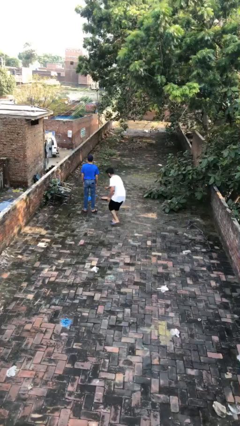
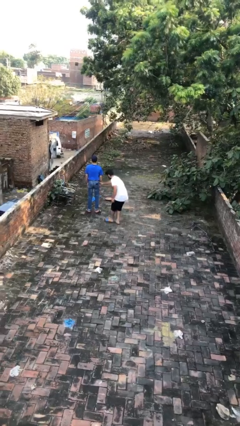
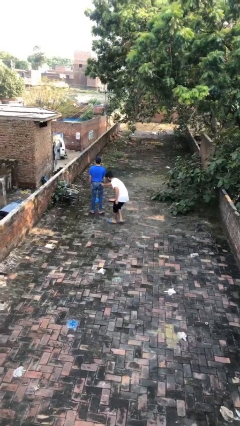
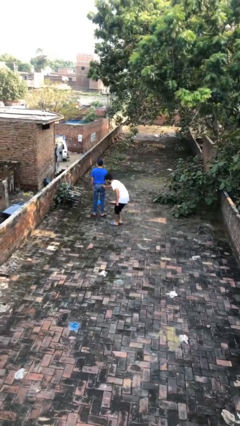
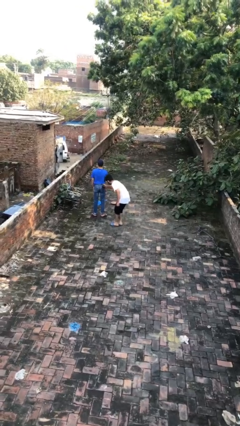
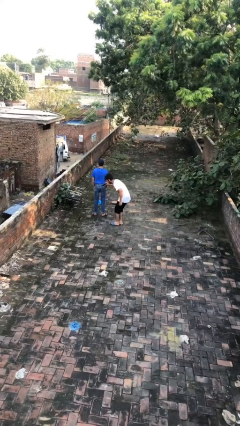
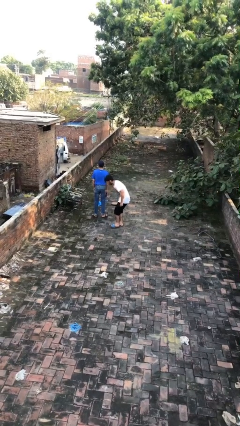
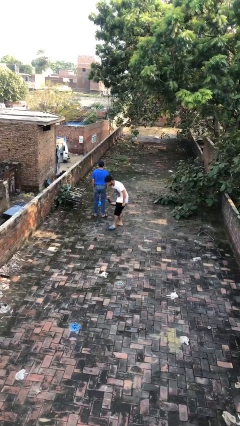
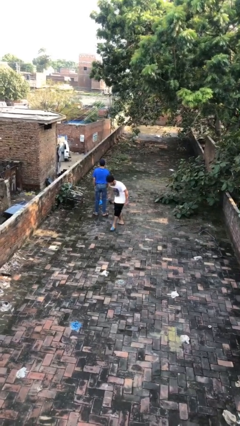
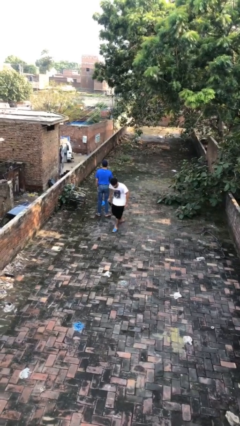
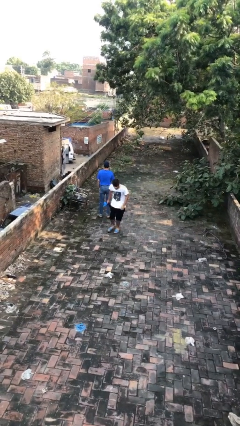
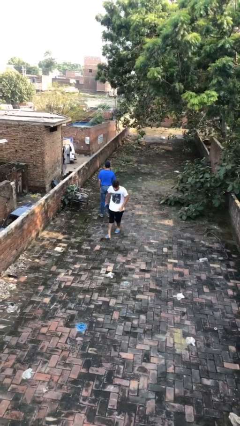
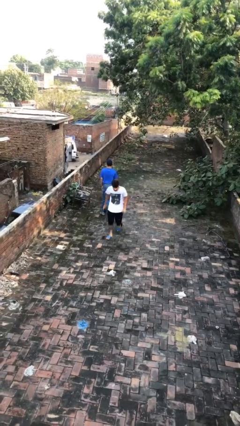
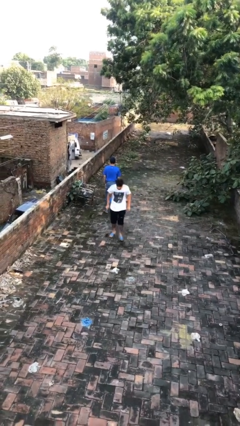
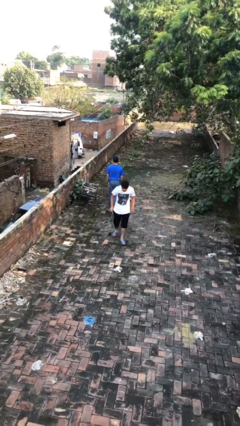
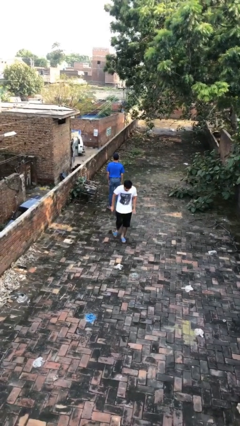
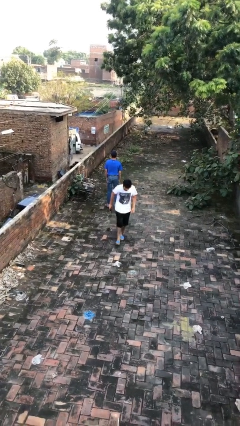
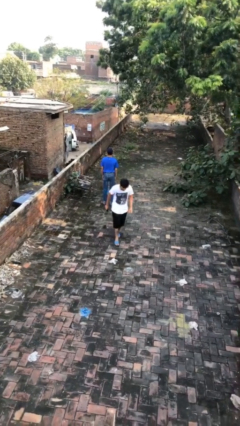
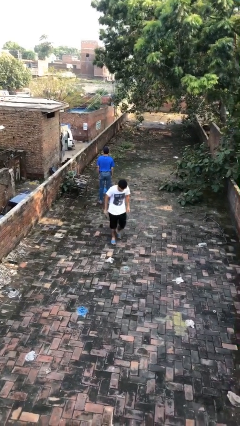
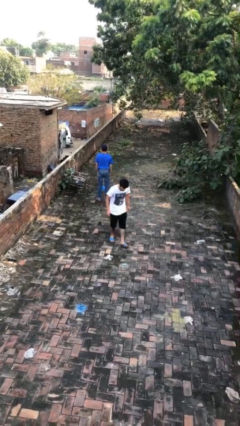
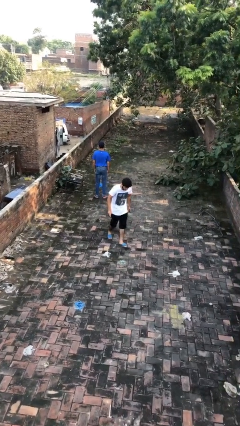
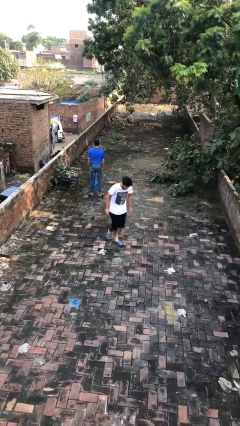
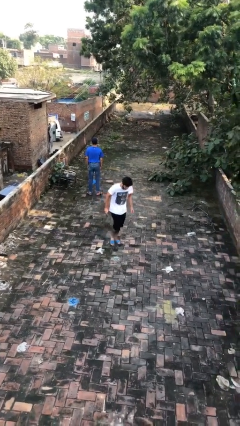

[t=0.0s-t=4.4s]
person steals object from person

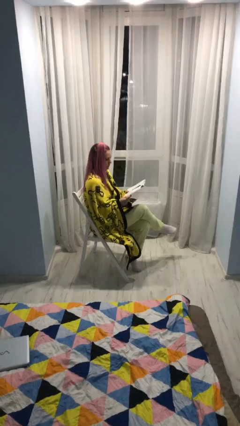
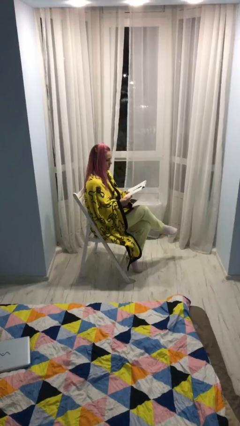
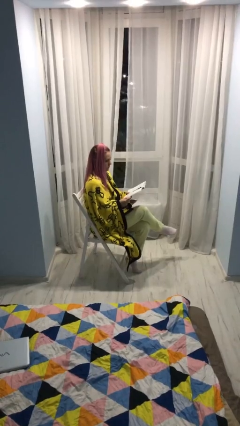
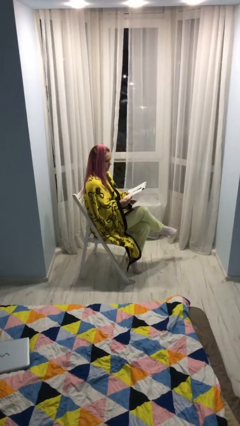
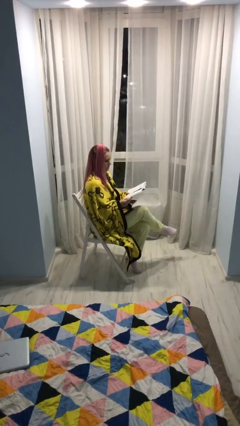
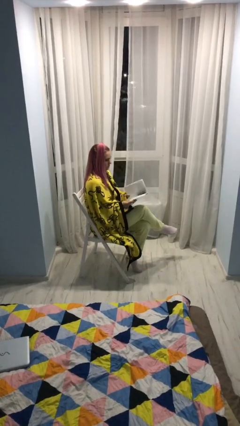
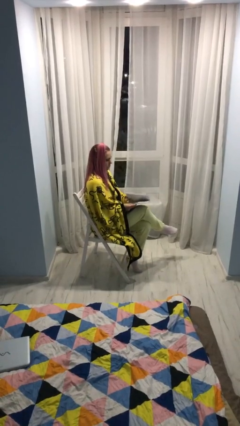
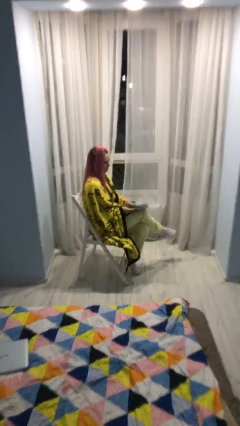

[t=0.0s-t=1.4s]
person reads document

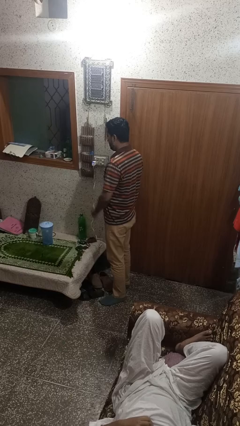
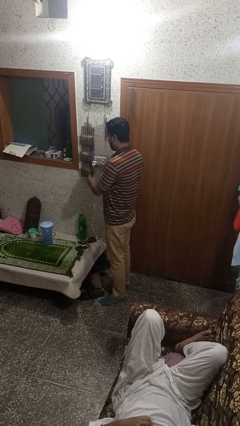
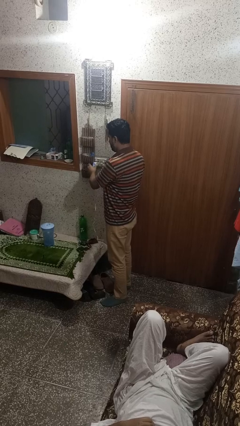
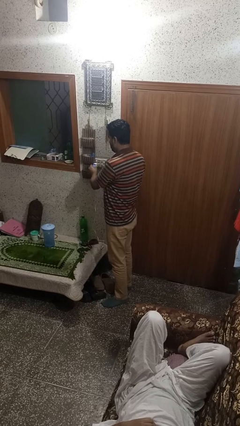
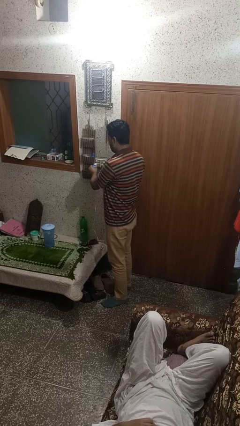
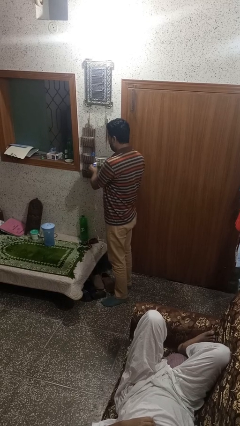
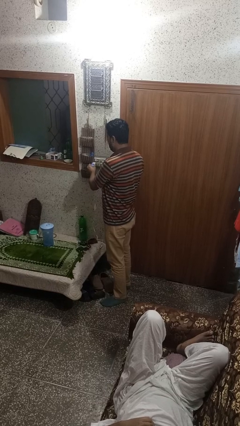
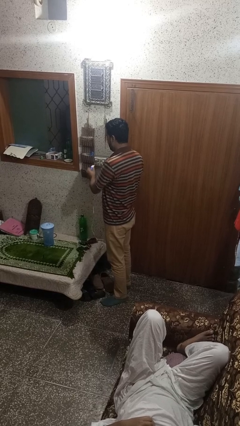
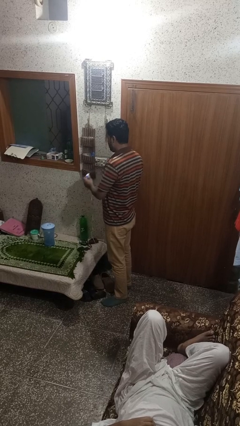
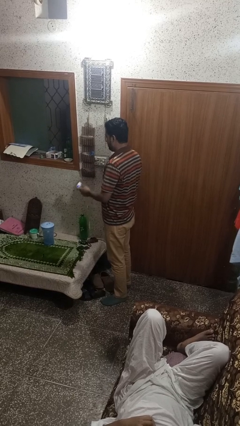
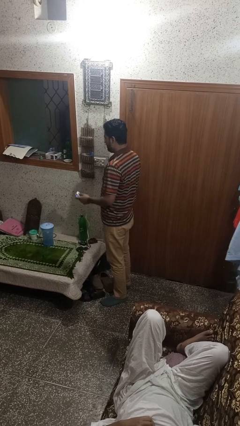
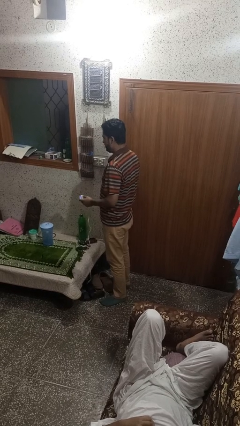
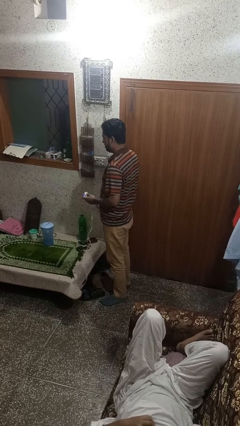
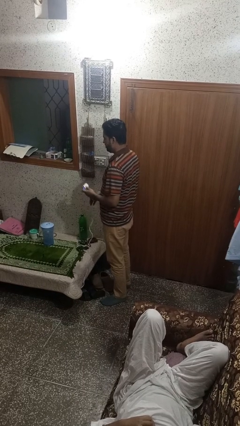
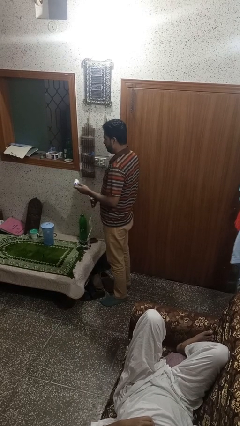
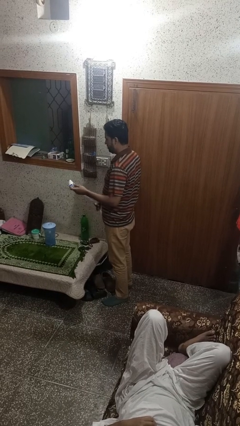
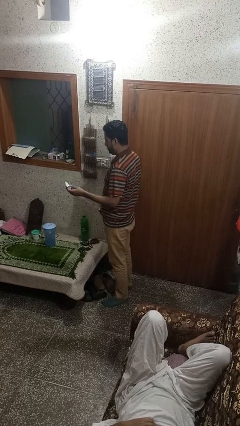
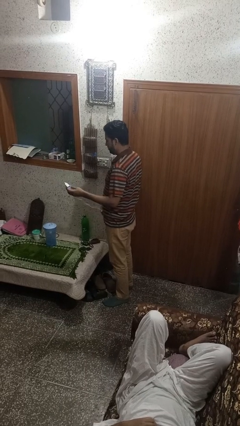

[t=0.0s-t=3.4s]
person unplugs from electrical socket

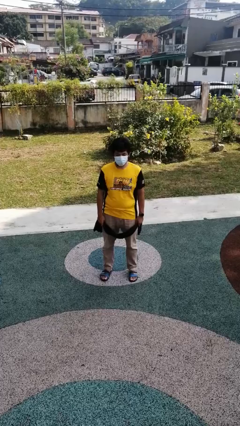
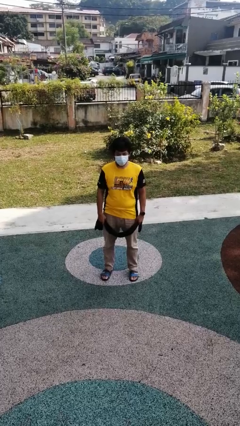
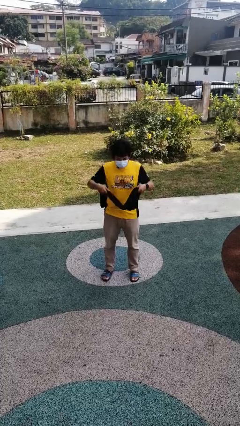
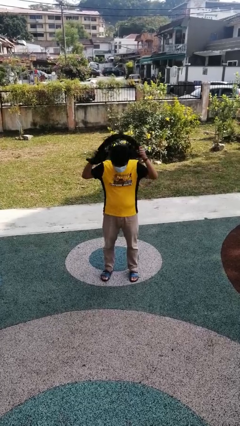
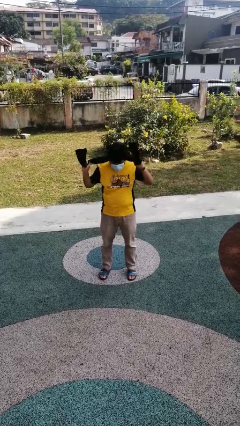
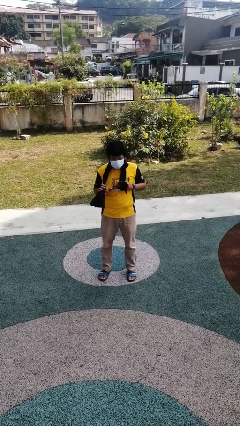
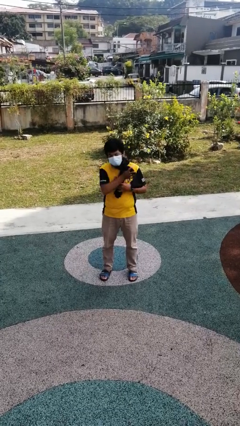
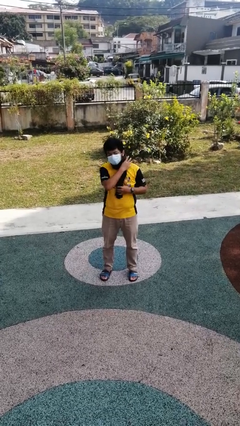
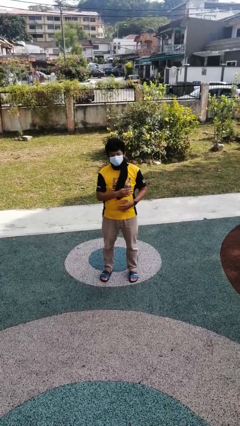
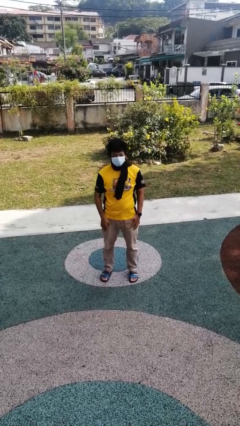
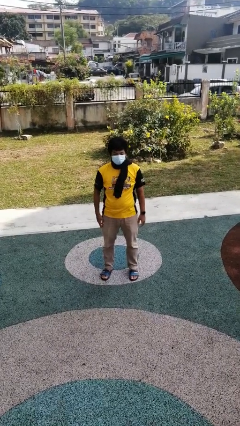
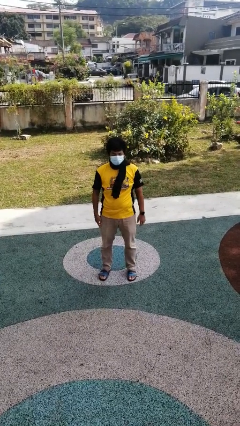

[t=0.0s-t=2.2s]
person puts on scarf

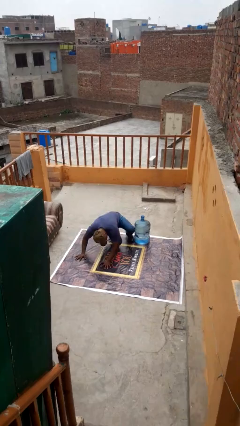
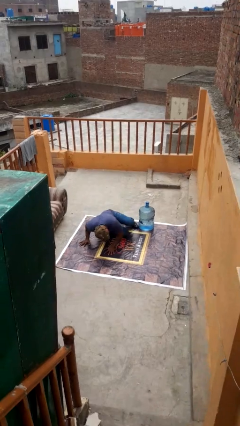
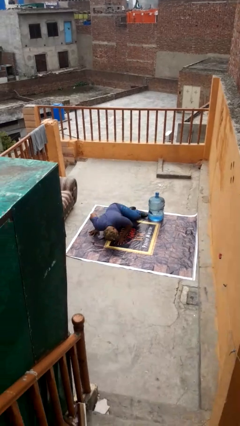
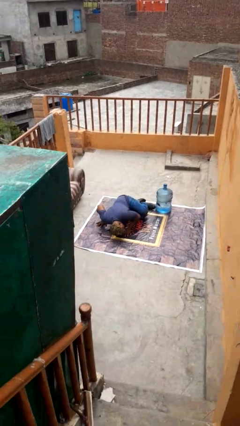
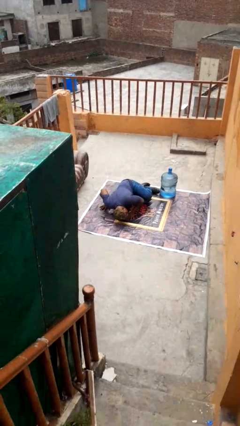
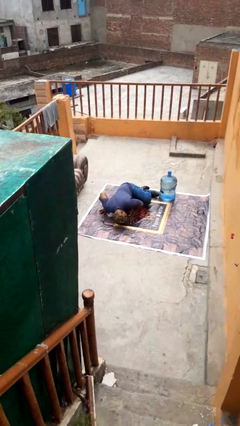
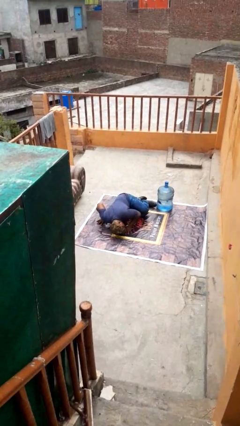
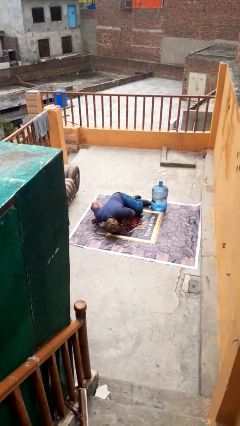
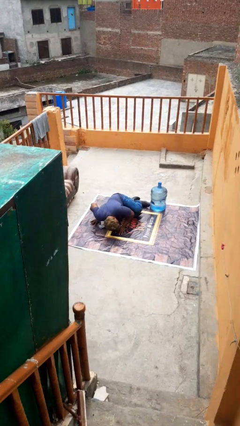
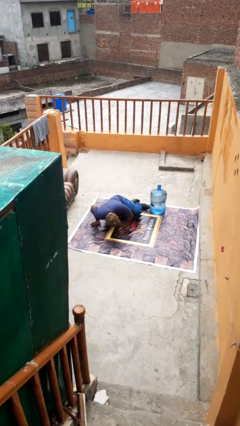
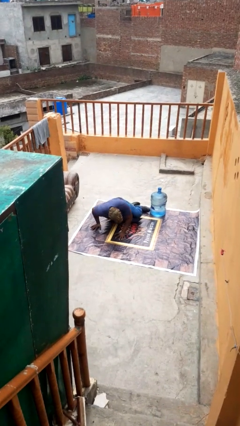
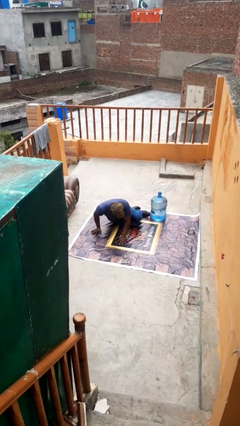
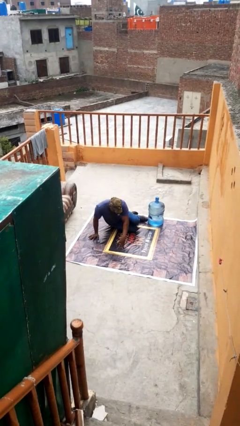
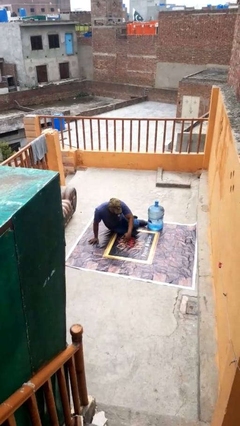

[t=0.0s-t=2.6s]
person lies down on floor

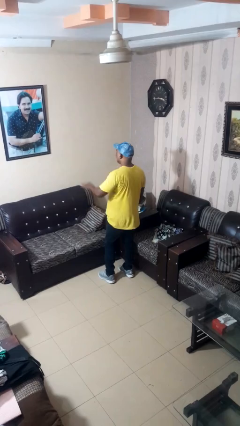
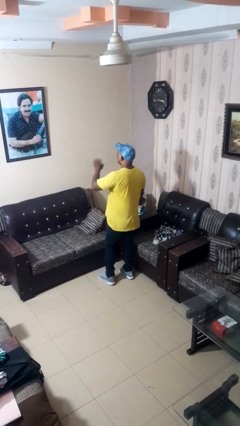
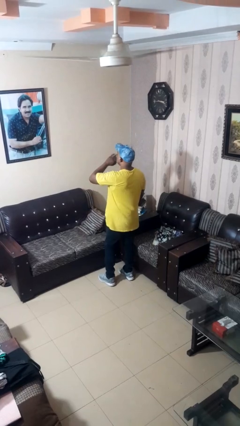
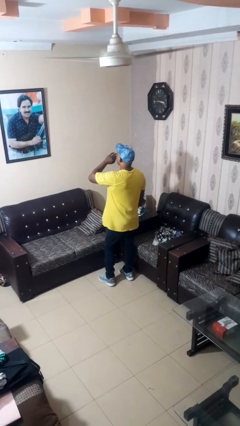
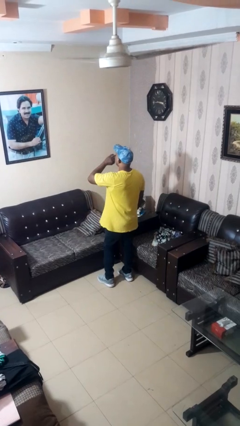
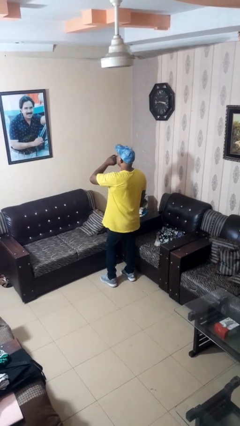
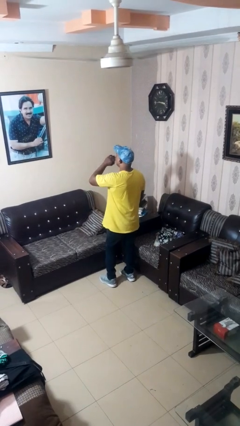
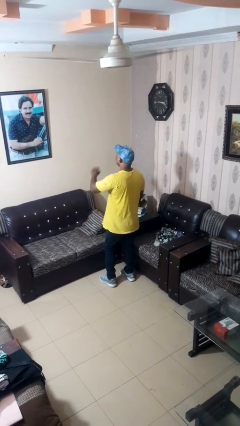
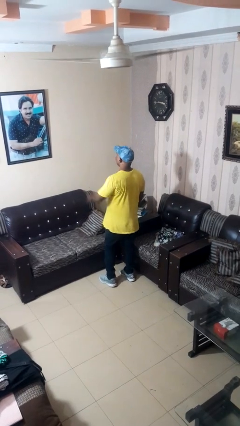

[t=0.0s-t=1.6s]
person yawns

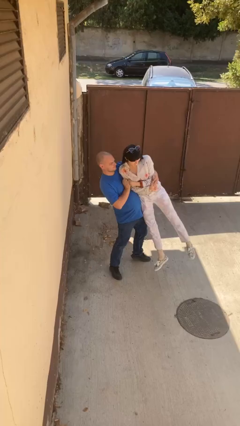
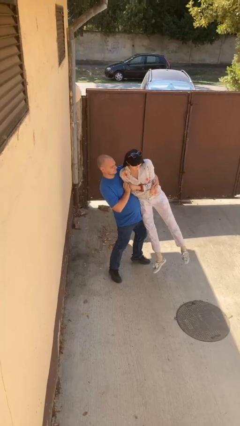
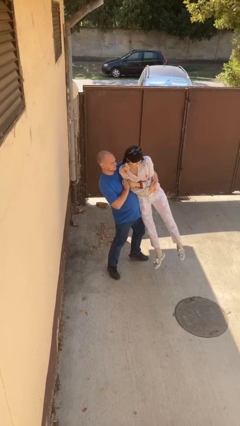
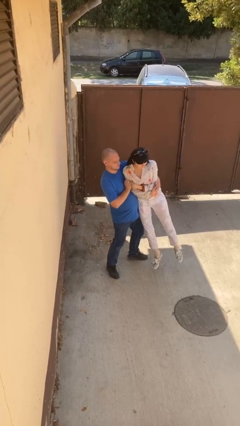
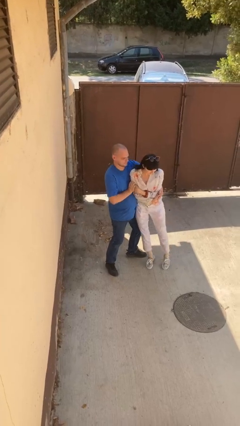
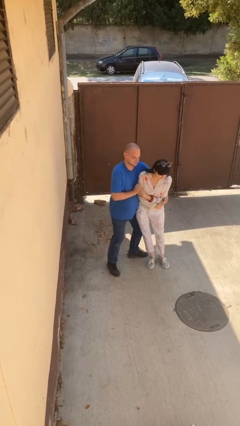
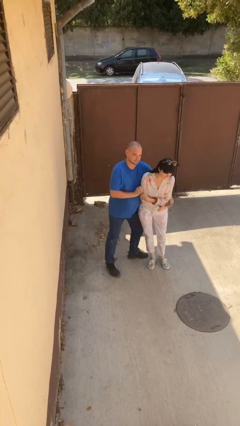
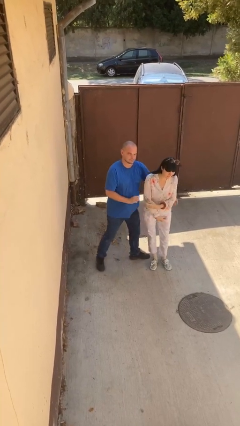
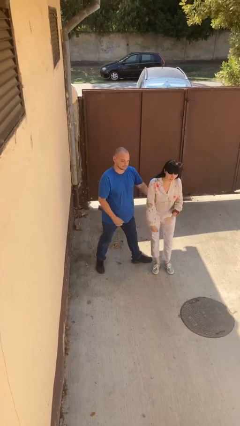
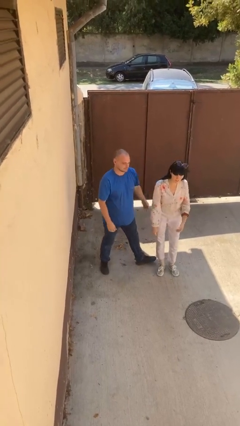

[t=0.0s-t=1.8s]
person puts down person
